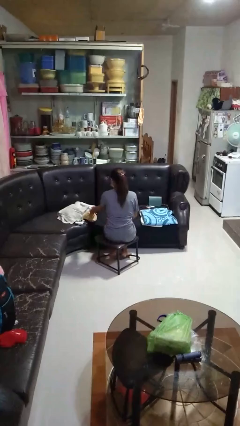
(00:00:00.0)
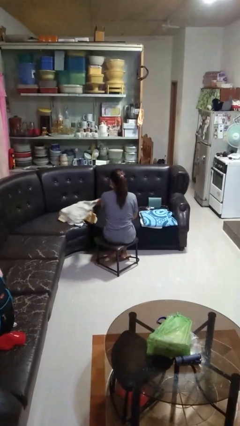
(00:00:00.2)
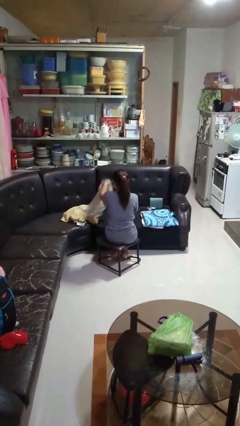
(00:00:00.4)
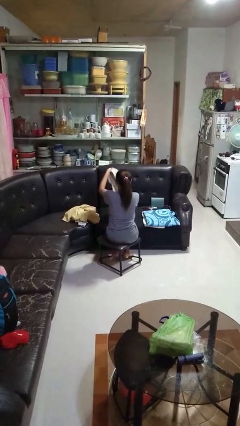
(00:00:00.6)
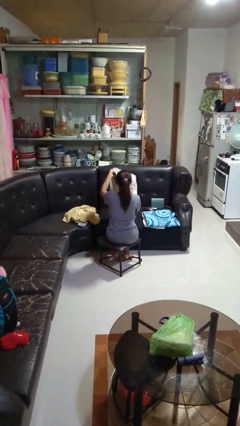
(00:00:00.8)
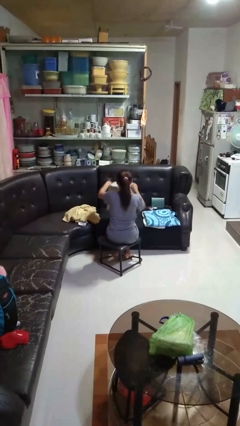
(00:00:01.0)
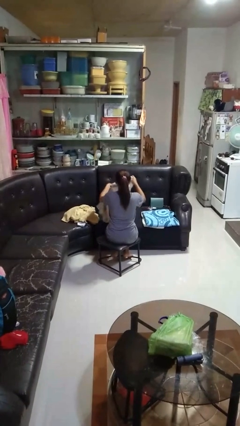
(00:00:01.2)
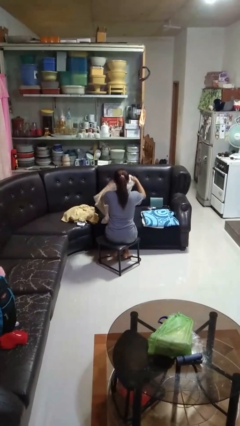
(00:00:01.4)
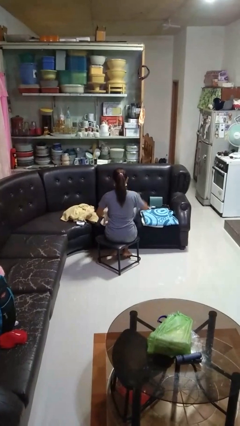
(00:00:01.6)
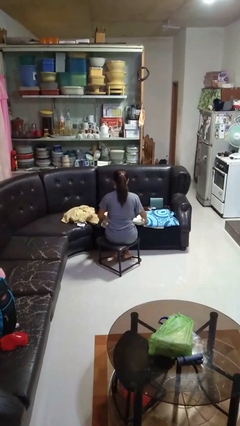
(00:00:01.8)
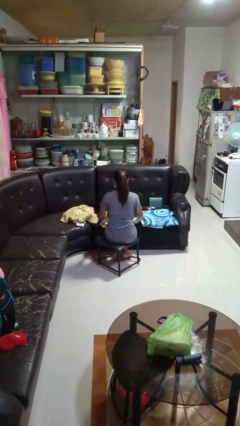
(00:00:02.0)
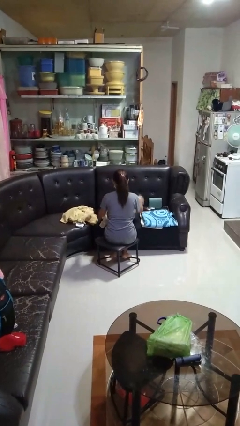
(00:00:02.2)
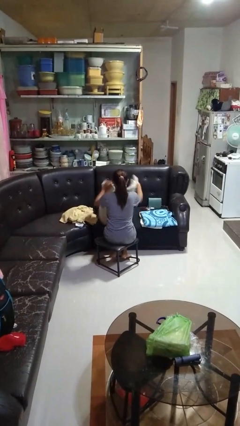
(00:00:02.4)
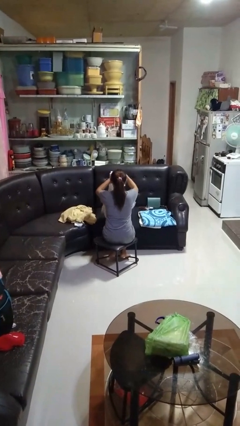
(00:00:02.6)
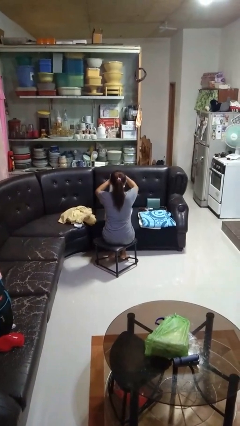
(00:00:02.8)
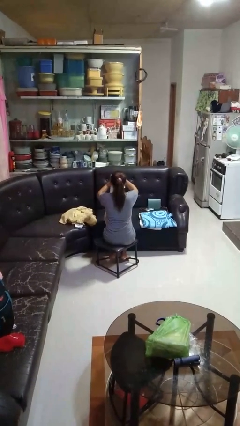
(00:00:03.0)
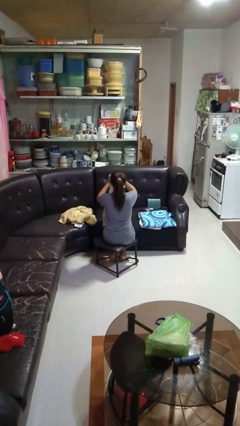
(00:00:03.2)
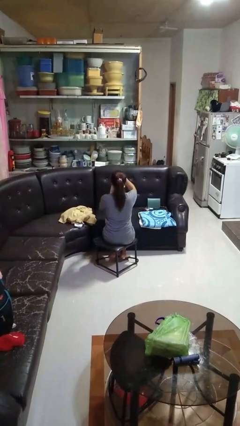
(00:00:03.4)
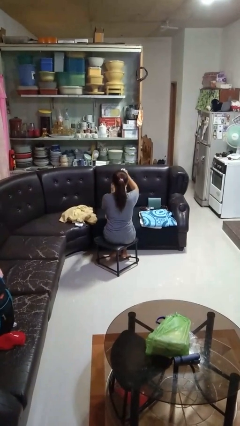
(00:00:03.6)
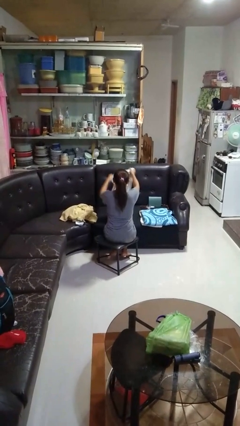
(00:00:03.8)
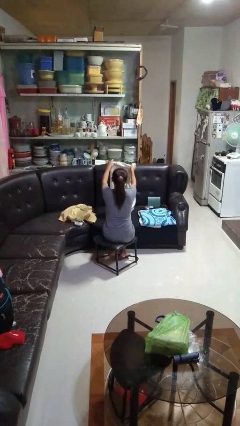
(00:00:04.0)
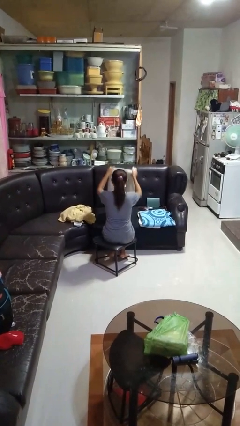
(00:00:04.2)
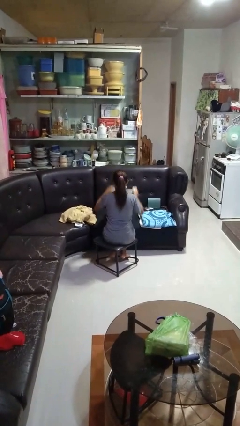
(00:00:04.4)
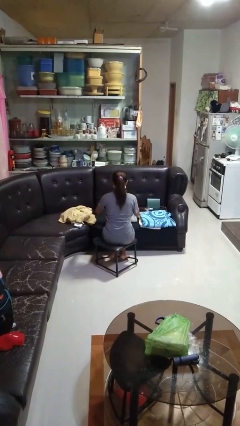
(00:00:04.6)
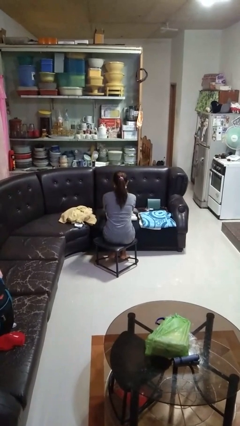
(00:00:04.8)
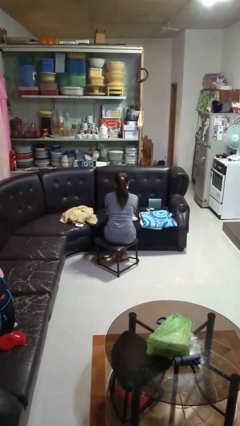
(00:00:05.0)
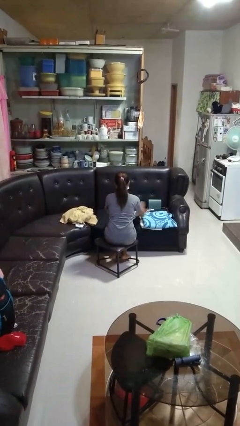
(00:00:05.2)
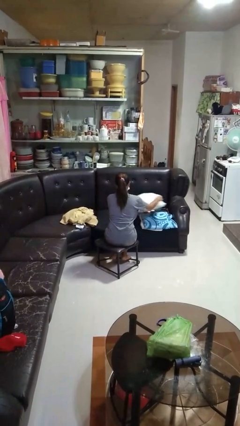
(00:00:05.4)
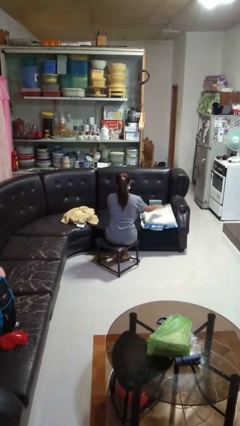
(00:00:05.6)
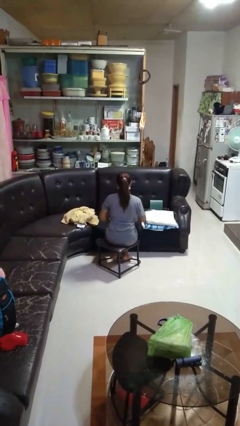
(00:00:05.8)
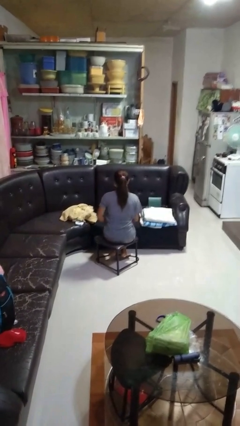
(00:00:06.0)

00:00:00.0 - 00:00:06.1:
person folds towel

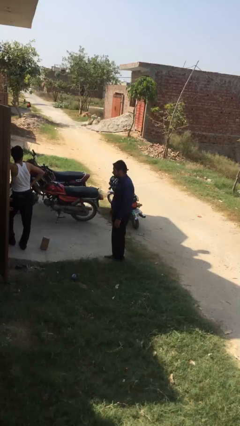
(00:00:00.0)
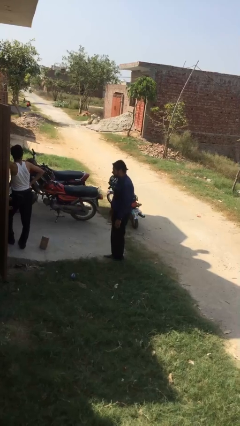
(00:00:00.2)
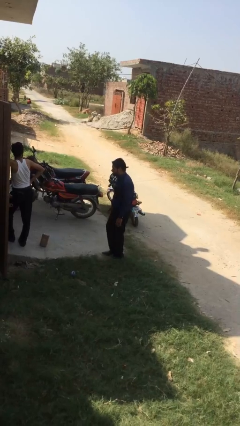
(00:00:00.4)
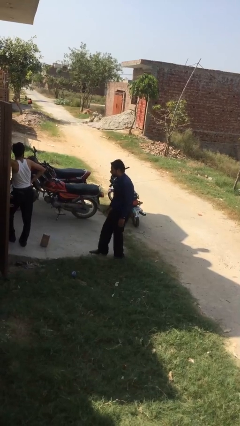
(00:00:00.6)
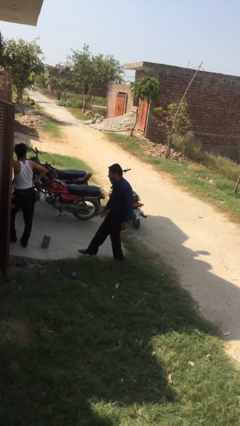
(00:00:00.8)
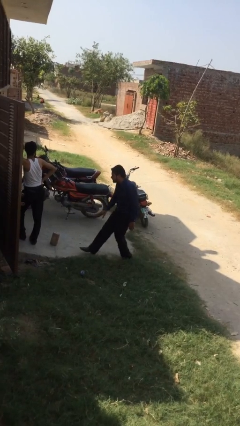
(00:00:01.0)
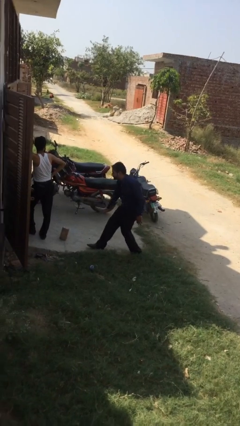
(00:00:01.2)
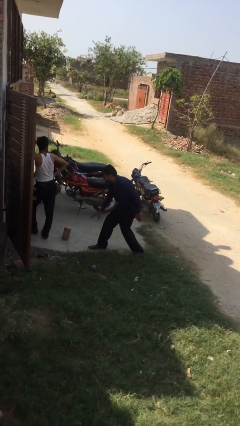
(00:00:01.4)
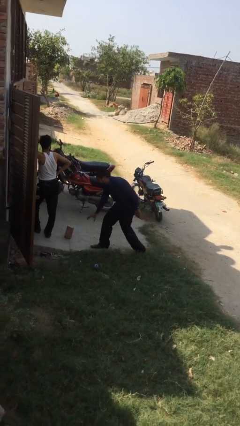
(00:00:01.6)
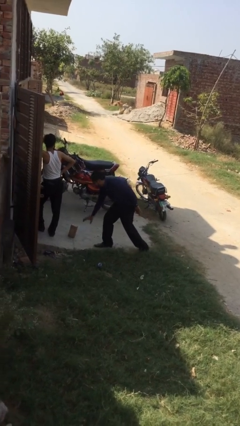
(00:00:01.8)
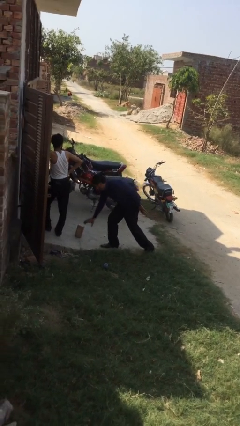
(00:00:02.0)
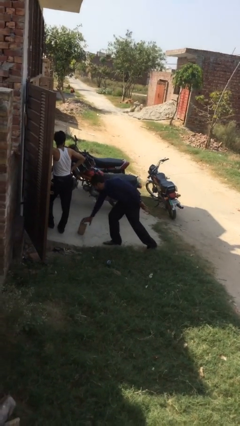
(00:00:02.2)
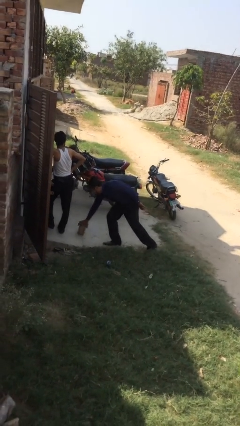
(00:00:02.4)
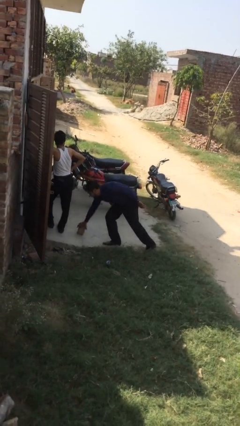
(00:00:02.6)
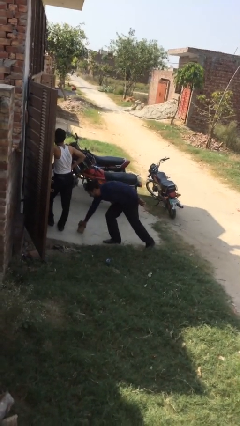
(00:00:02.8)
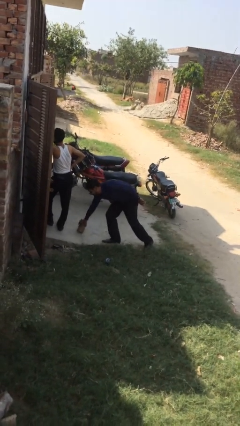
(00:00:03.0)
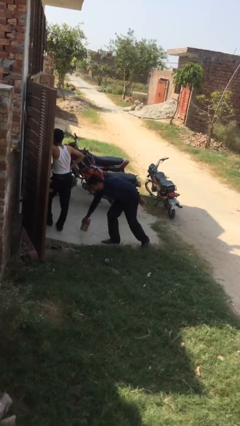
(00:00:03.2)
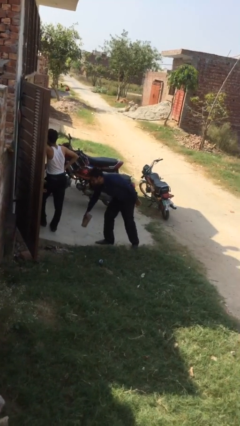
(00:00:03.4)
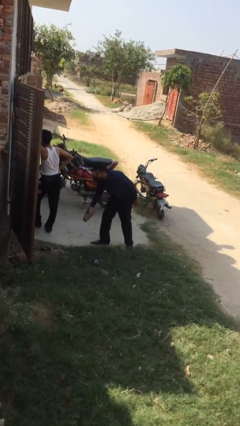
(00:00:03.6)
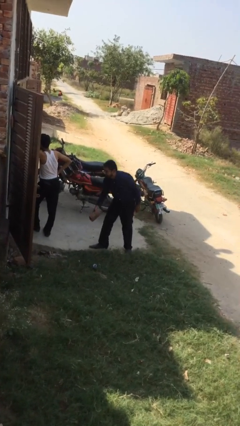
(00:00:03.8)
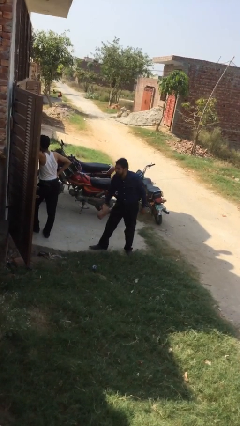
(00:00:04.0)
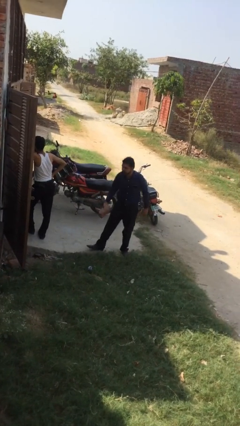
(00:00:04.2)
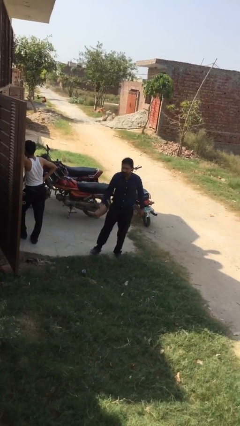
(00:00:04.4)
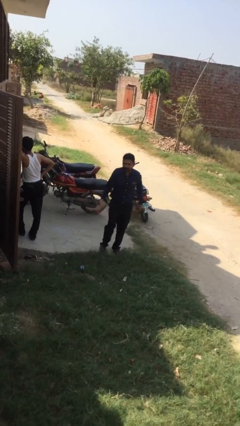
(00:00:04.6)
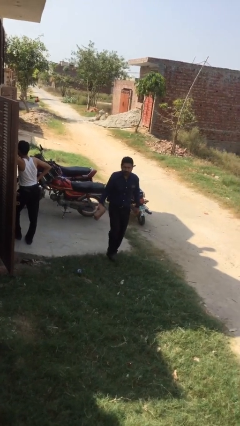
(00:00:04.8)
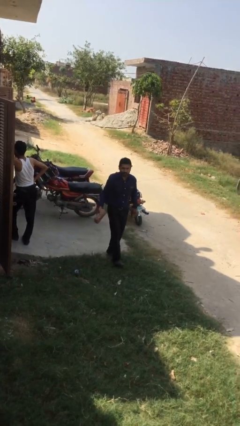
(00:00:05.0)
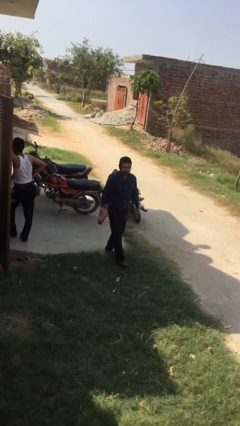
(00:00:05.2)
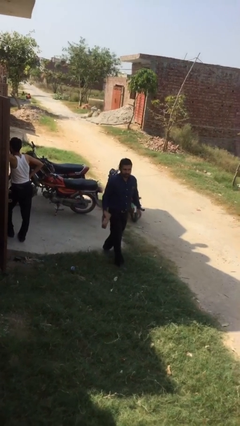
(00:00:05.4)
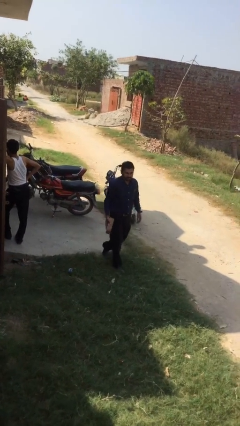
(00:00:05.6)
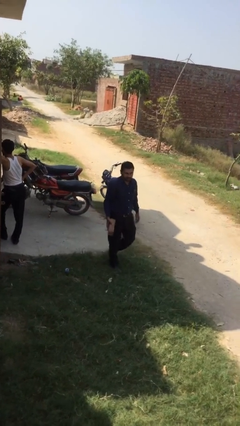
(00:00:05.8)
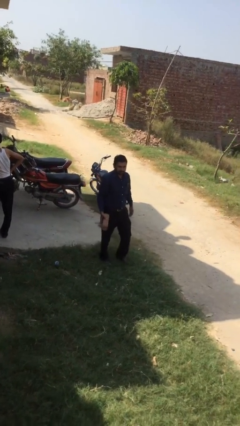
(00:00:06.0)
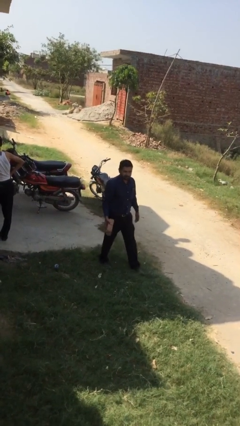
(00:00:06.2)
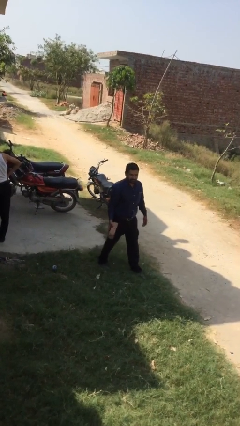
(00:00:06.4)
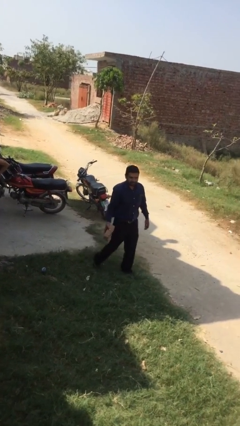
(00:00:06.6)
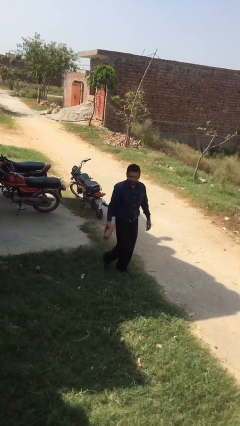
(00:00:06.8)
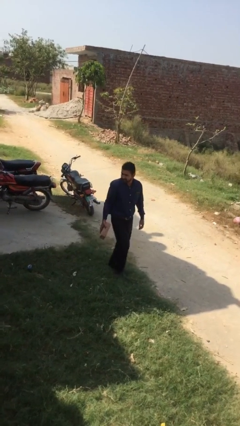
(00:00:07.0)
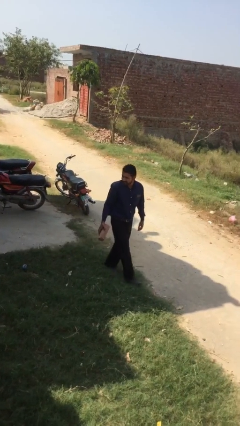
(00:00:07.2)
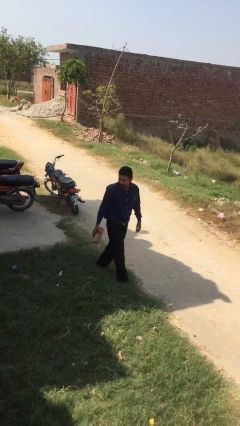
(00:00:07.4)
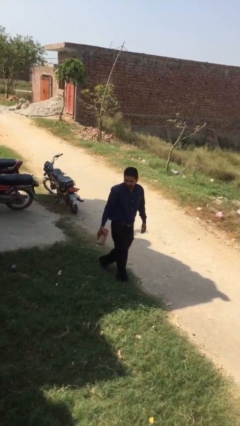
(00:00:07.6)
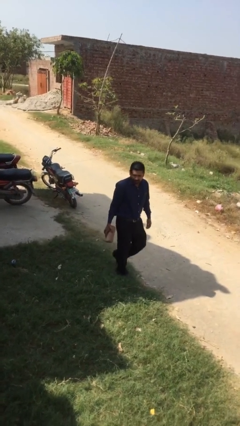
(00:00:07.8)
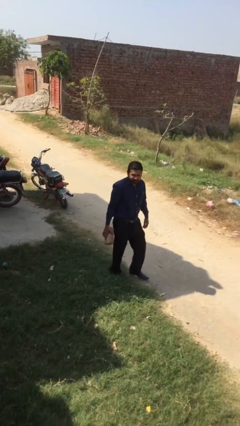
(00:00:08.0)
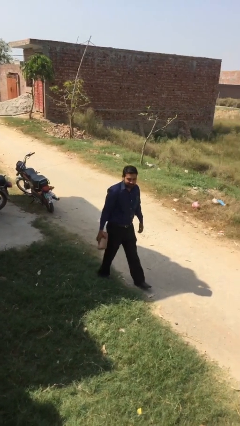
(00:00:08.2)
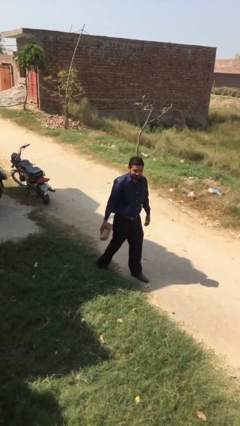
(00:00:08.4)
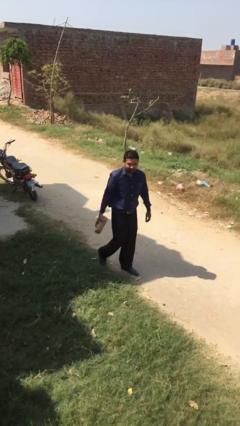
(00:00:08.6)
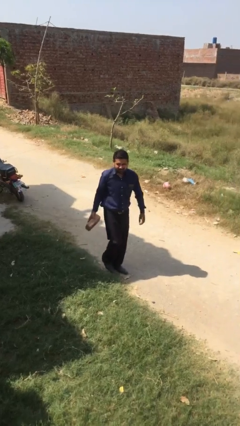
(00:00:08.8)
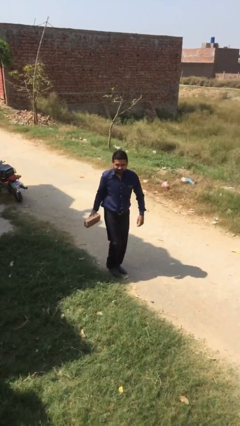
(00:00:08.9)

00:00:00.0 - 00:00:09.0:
person steals object from person

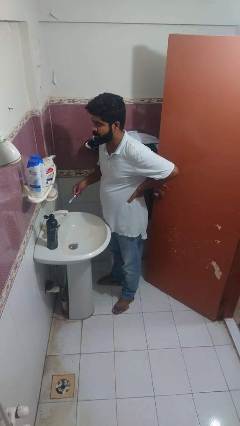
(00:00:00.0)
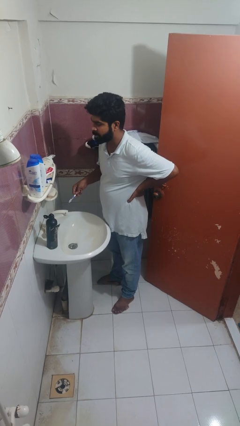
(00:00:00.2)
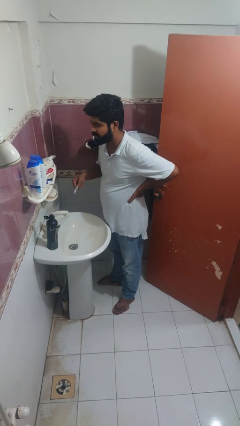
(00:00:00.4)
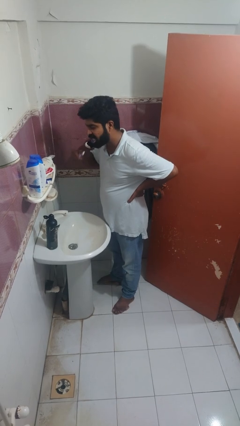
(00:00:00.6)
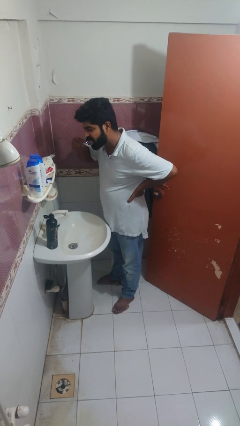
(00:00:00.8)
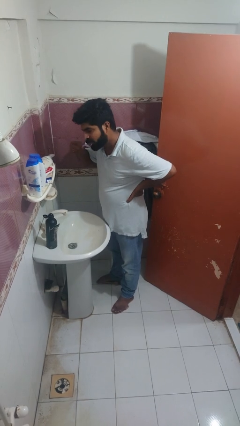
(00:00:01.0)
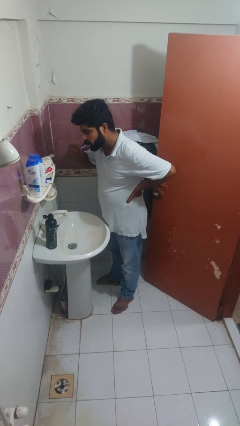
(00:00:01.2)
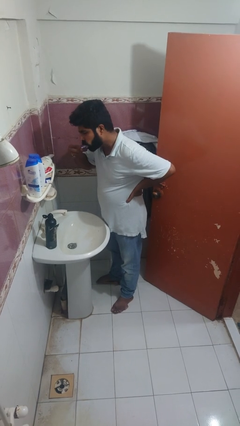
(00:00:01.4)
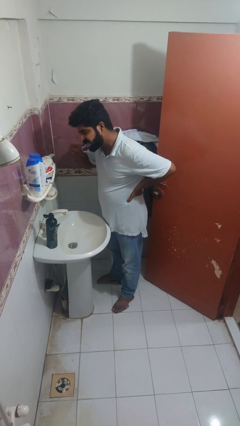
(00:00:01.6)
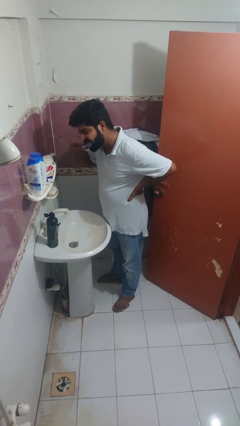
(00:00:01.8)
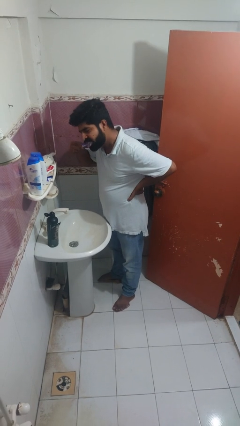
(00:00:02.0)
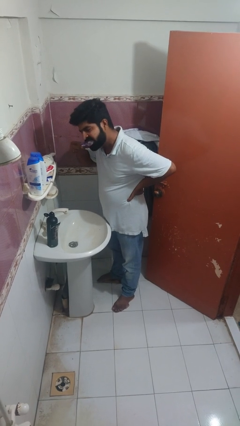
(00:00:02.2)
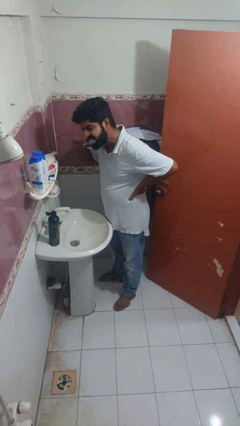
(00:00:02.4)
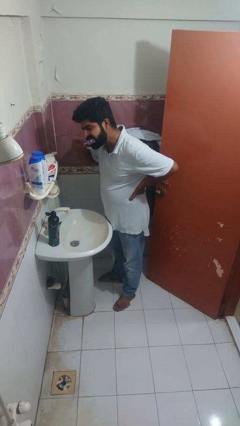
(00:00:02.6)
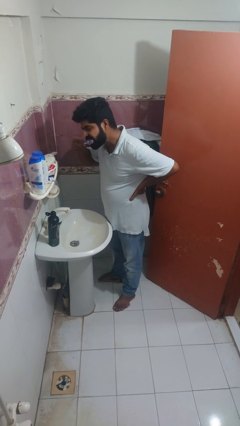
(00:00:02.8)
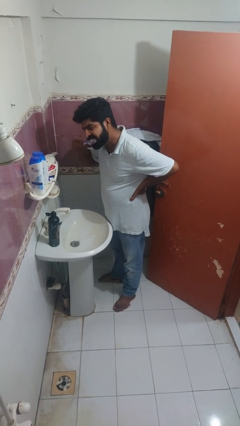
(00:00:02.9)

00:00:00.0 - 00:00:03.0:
person brushes teeth
